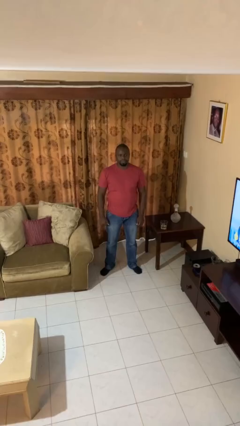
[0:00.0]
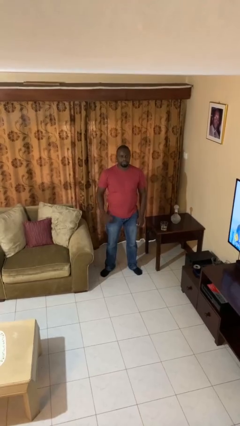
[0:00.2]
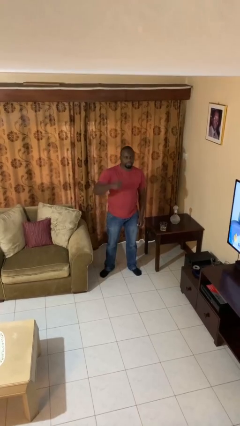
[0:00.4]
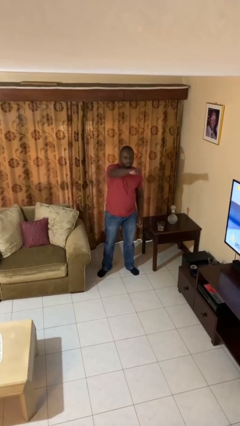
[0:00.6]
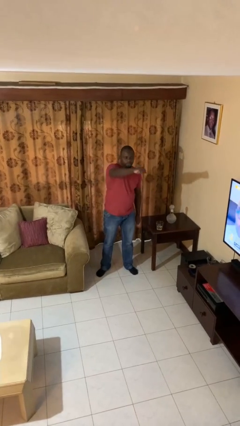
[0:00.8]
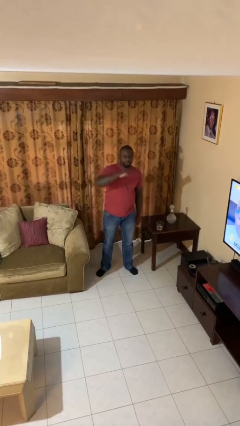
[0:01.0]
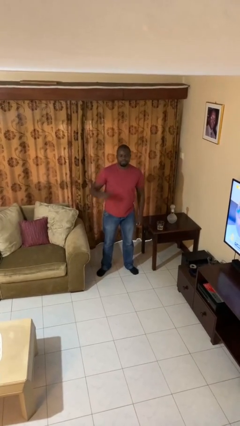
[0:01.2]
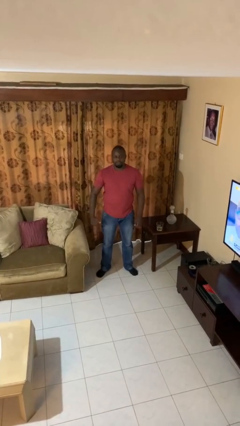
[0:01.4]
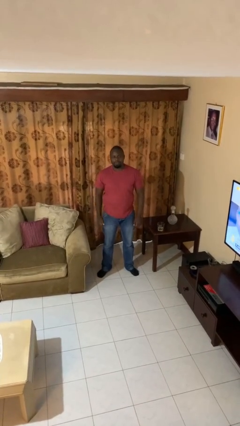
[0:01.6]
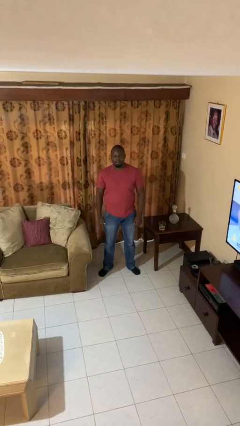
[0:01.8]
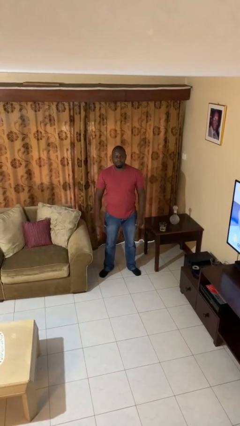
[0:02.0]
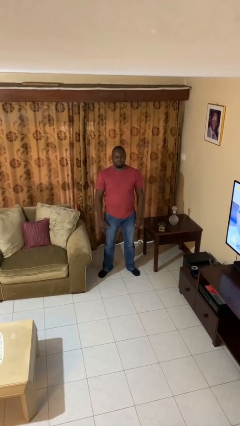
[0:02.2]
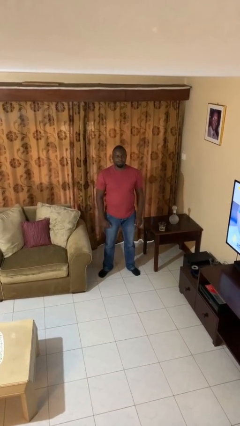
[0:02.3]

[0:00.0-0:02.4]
person punches

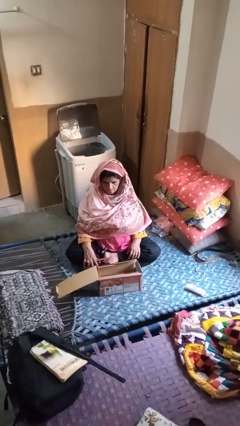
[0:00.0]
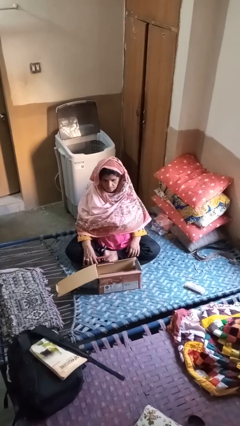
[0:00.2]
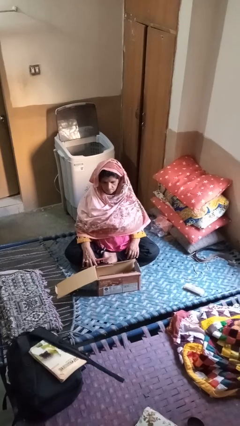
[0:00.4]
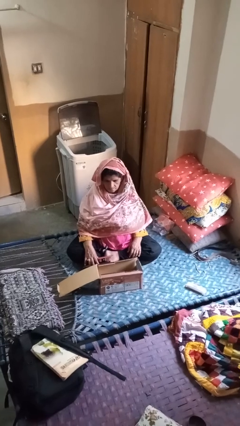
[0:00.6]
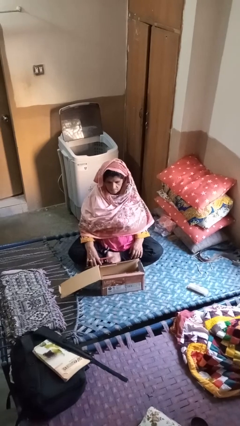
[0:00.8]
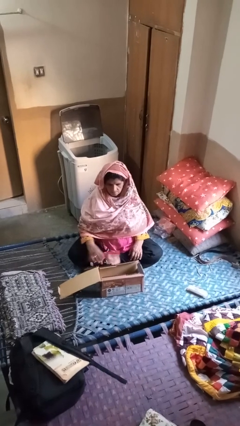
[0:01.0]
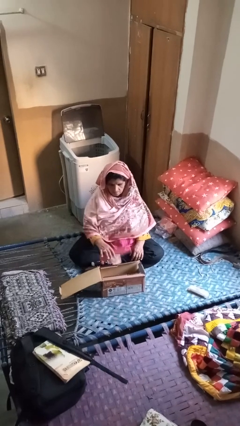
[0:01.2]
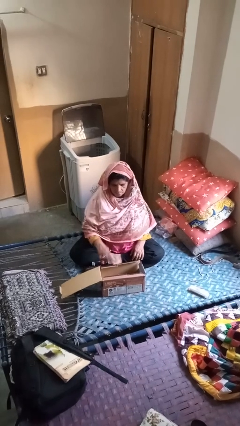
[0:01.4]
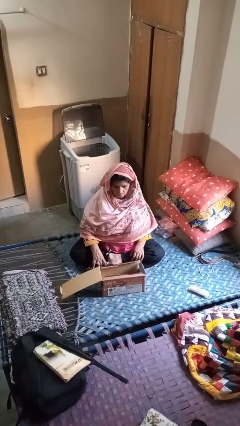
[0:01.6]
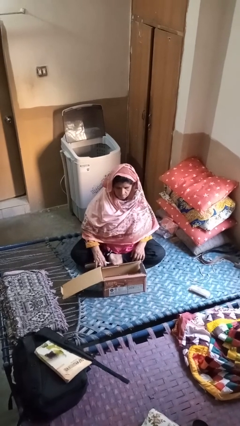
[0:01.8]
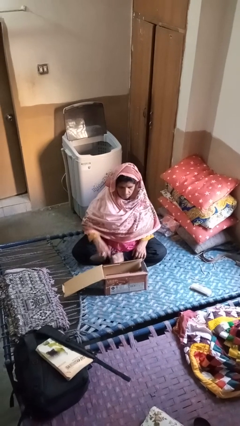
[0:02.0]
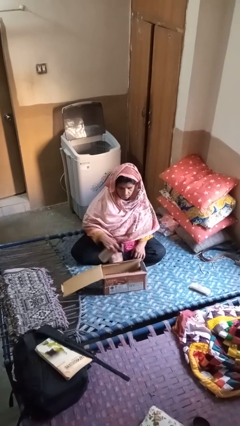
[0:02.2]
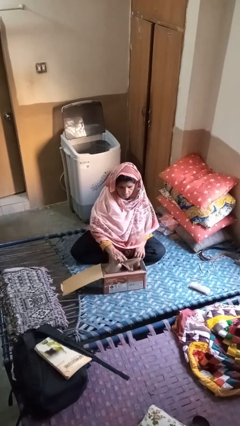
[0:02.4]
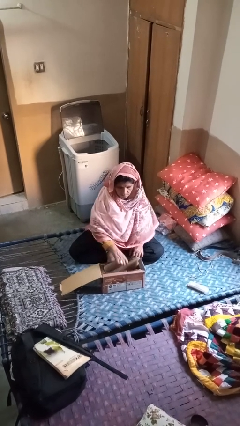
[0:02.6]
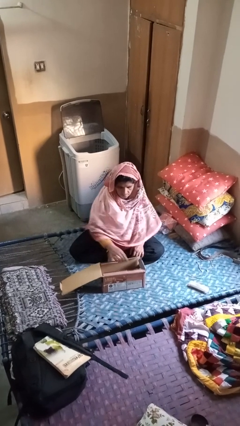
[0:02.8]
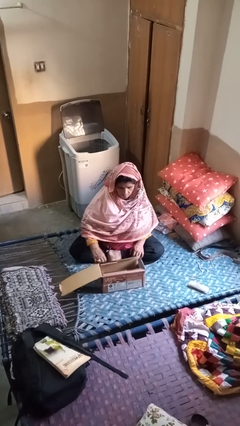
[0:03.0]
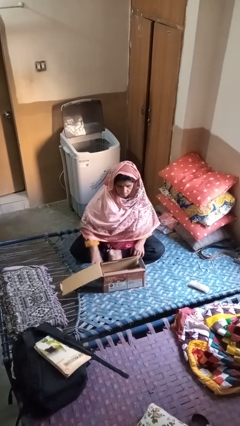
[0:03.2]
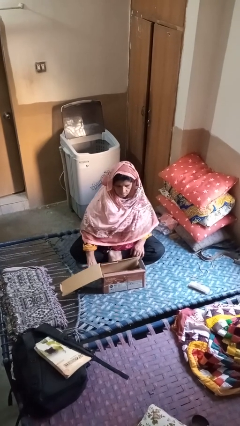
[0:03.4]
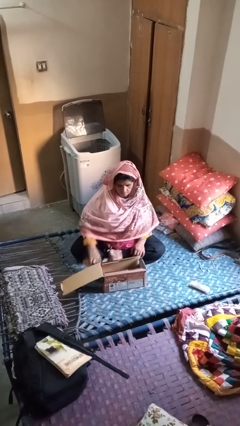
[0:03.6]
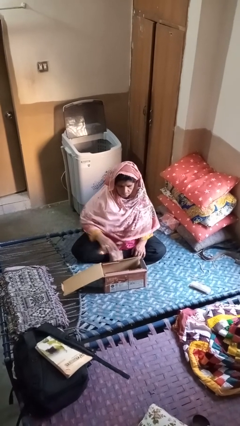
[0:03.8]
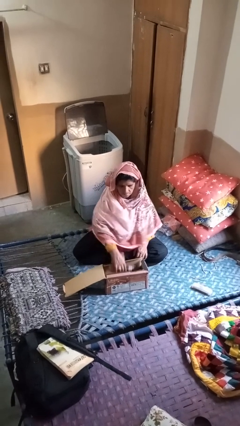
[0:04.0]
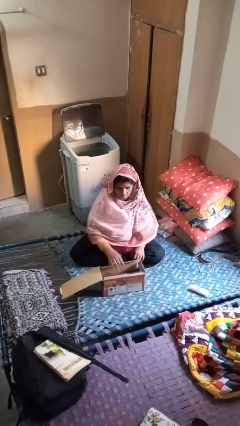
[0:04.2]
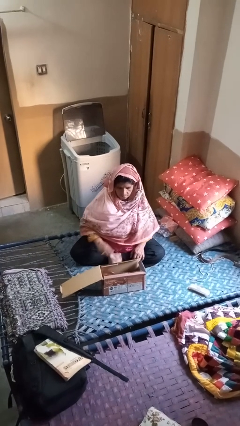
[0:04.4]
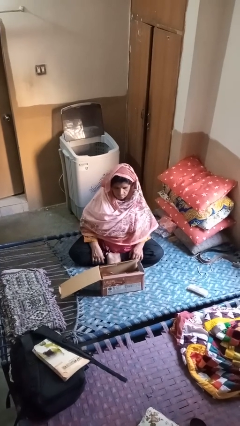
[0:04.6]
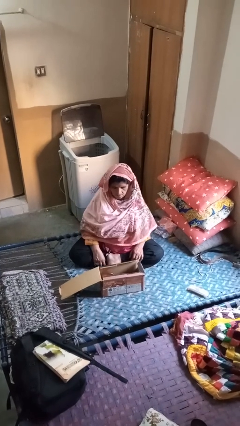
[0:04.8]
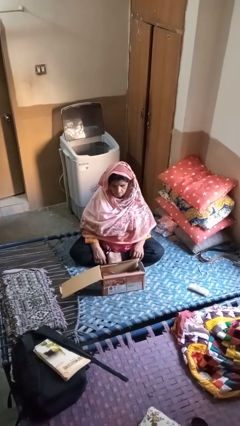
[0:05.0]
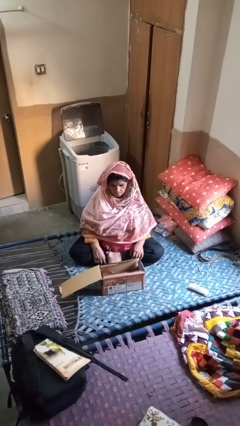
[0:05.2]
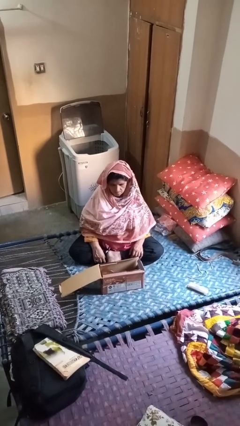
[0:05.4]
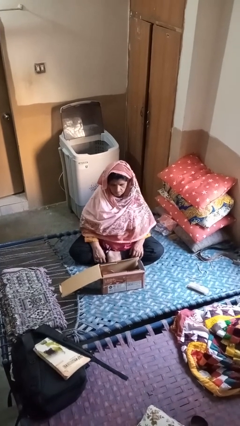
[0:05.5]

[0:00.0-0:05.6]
person puts object into box

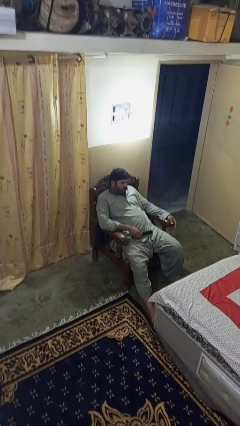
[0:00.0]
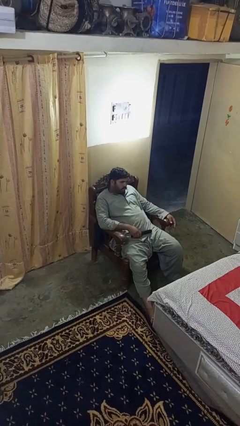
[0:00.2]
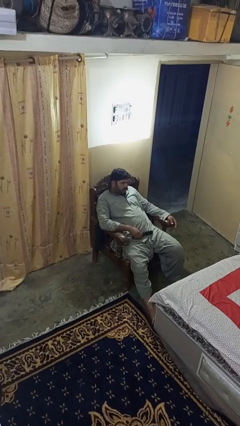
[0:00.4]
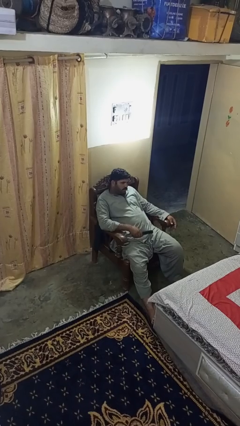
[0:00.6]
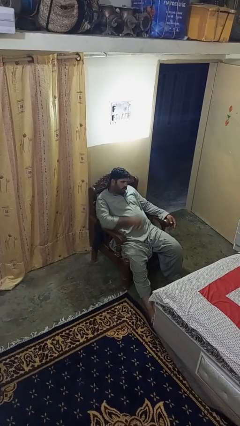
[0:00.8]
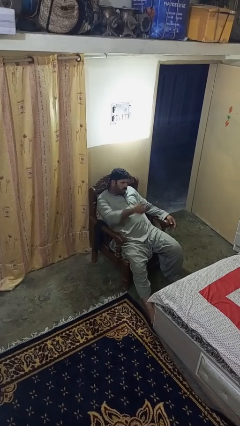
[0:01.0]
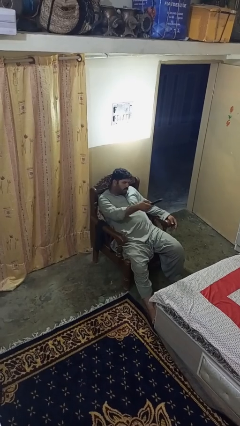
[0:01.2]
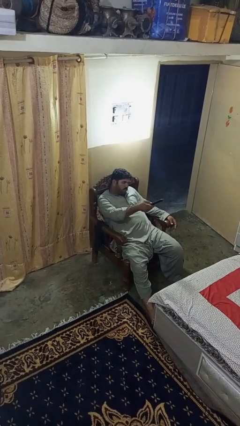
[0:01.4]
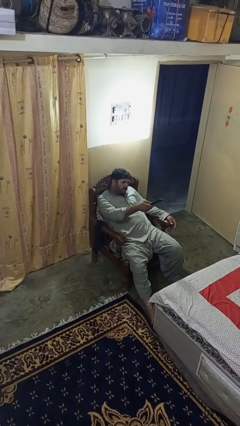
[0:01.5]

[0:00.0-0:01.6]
person uses television remote

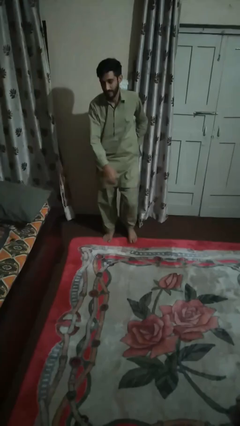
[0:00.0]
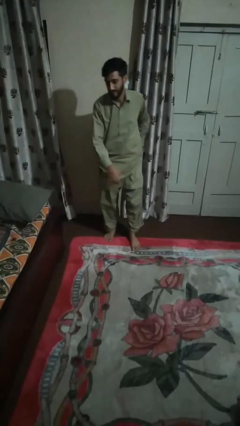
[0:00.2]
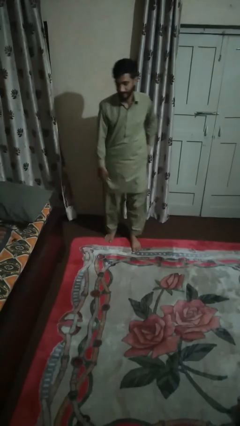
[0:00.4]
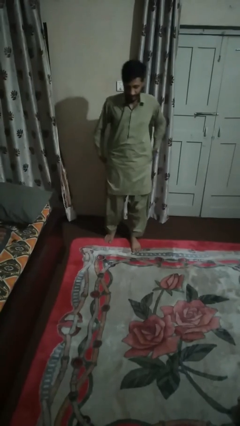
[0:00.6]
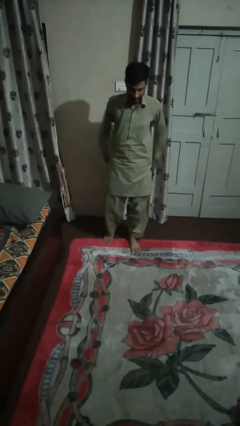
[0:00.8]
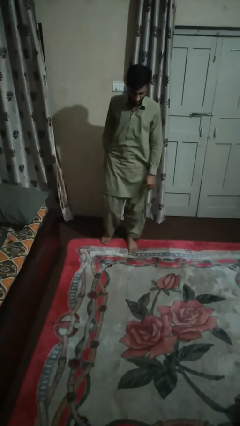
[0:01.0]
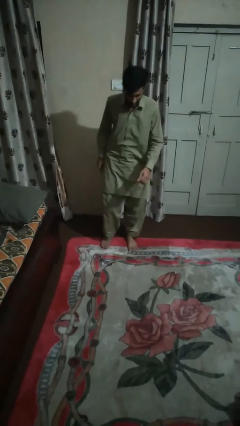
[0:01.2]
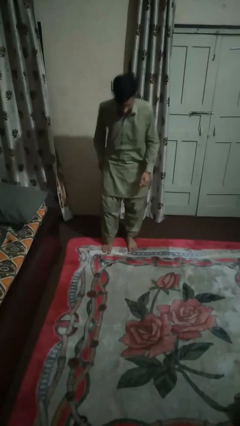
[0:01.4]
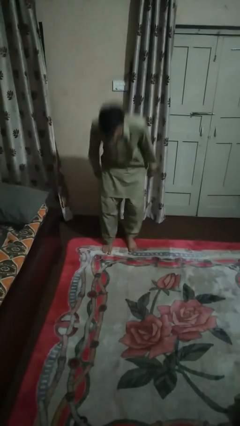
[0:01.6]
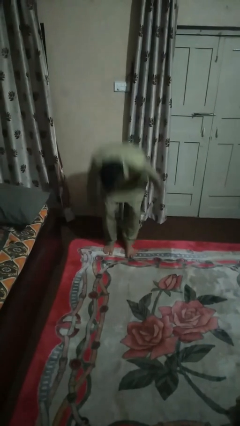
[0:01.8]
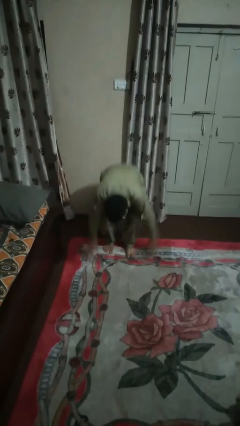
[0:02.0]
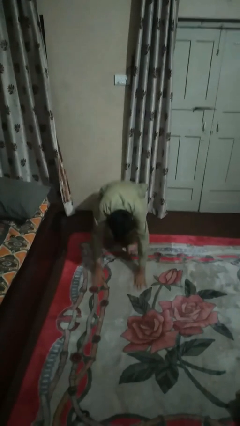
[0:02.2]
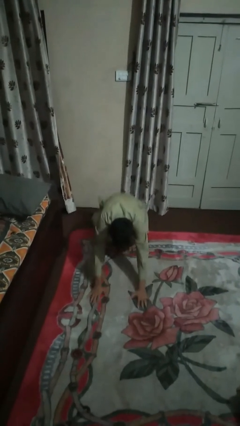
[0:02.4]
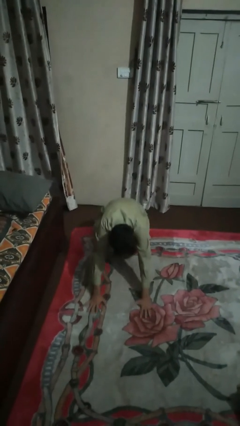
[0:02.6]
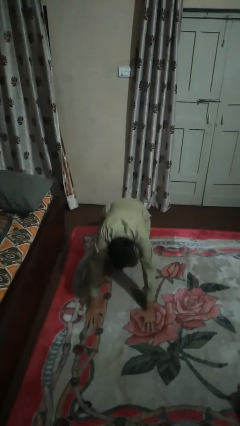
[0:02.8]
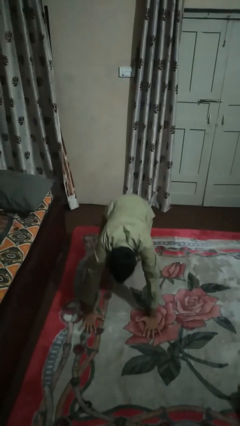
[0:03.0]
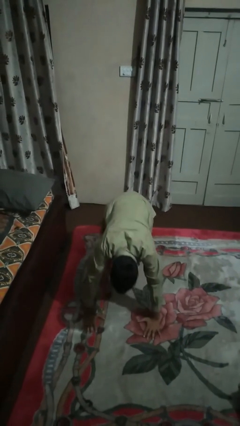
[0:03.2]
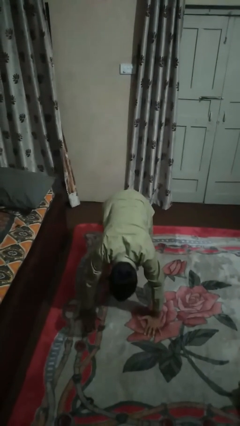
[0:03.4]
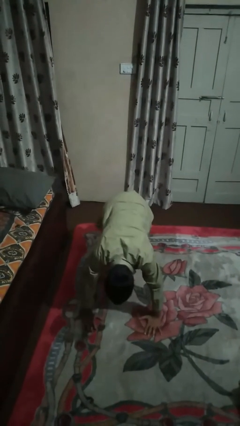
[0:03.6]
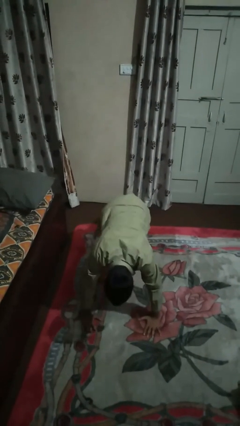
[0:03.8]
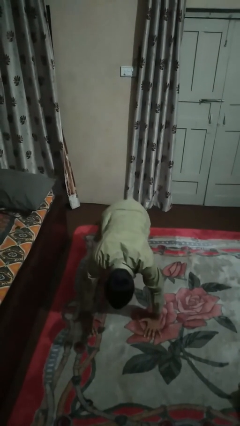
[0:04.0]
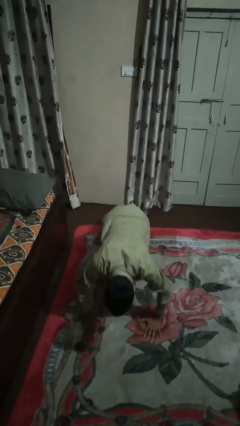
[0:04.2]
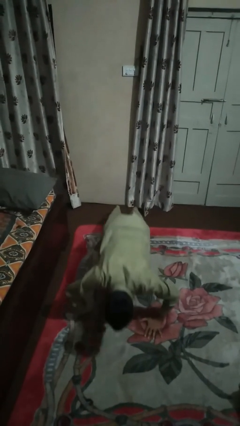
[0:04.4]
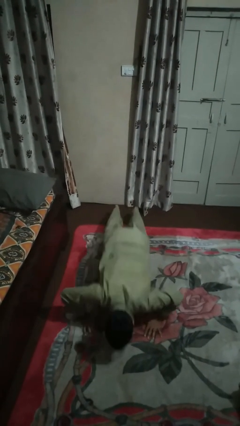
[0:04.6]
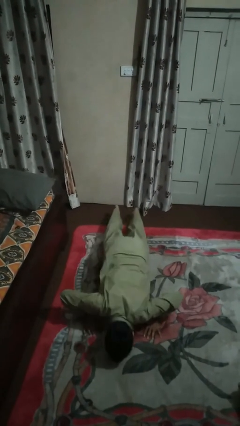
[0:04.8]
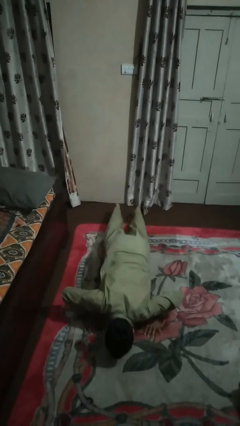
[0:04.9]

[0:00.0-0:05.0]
person exercises with pushup

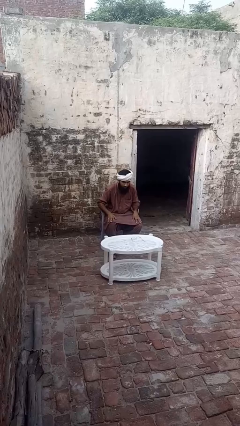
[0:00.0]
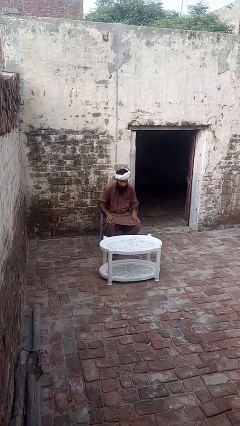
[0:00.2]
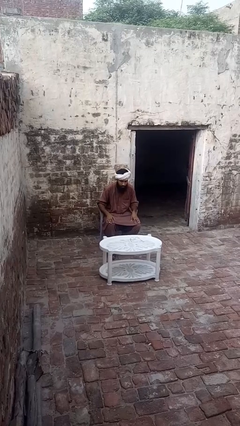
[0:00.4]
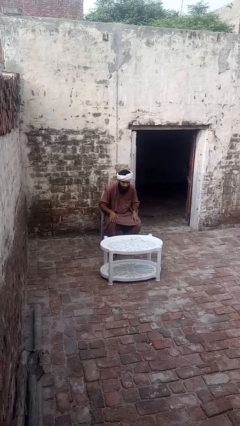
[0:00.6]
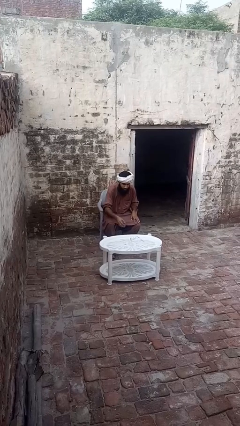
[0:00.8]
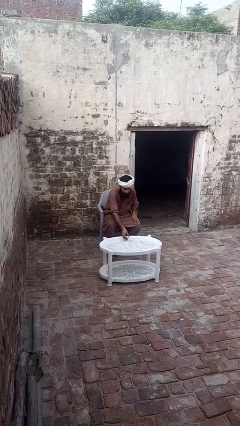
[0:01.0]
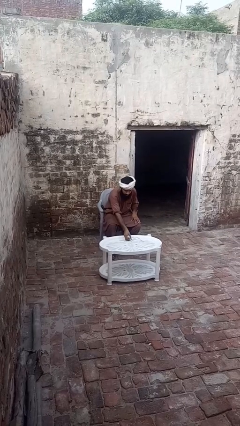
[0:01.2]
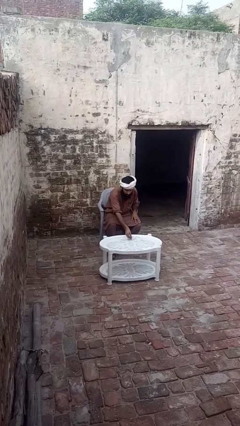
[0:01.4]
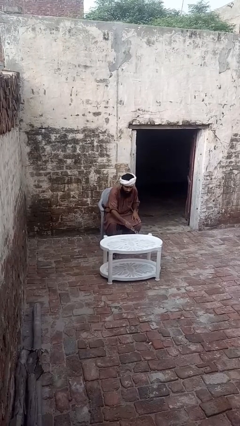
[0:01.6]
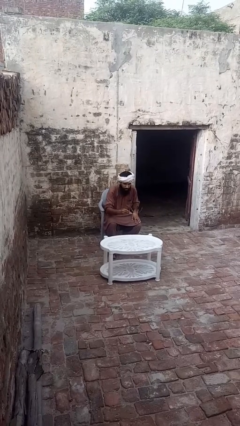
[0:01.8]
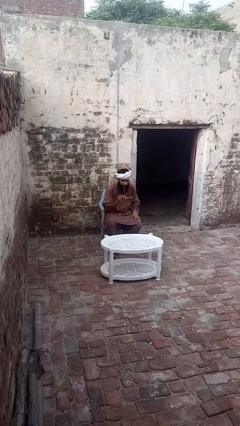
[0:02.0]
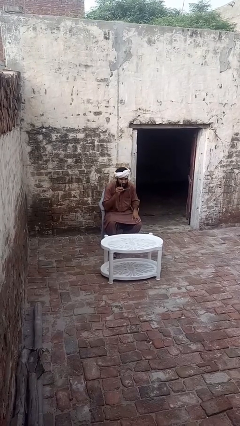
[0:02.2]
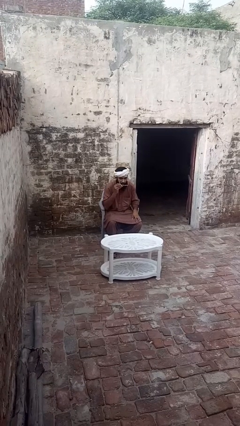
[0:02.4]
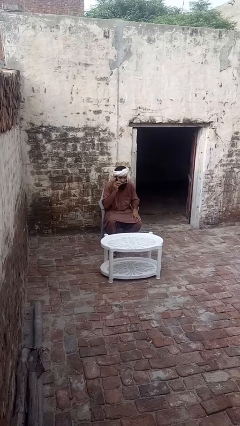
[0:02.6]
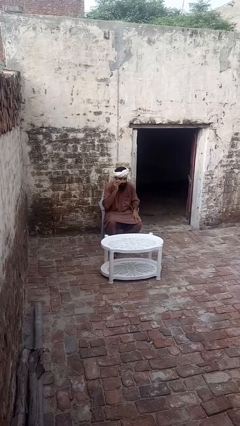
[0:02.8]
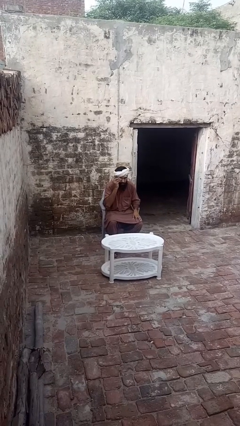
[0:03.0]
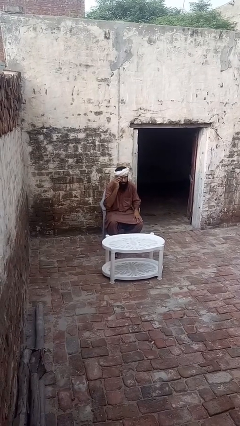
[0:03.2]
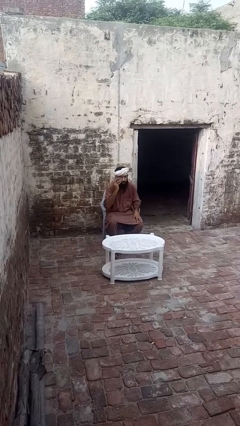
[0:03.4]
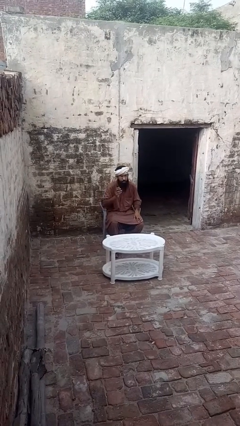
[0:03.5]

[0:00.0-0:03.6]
person puts on glasses
